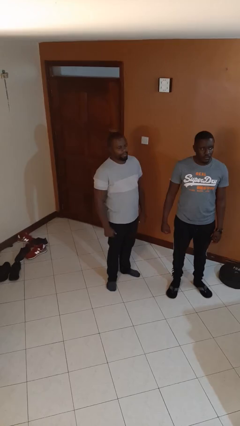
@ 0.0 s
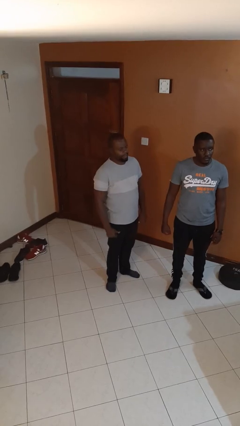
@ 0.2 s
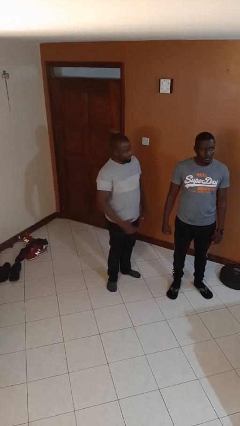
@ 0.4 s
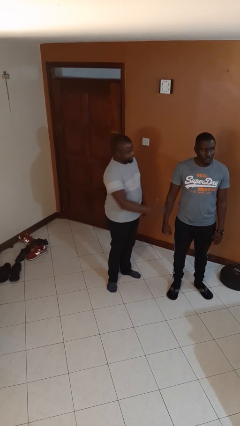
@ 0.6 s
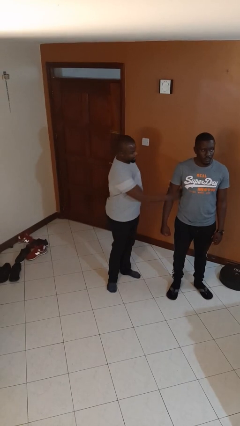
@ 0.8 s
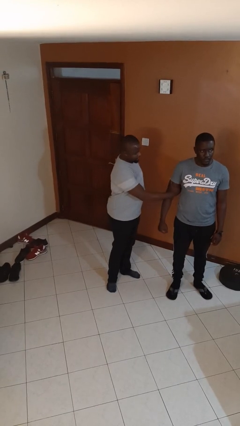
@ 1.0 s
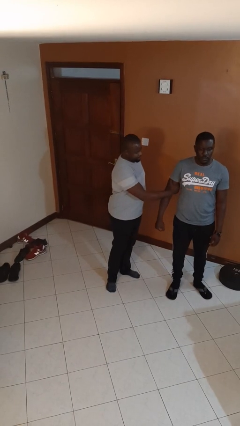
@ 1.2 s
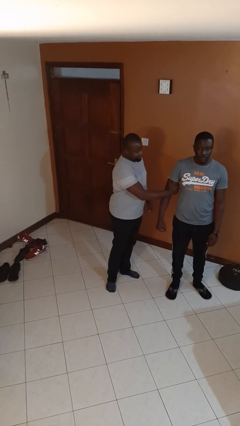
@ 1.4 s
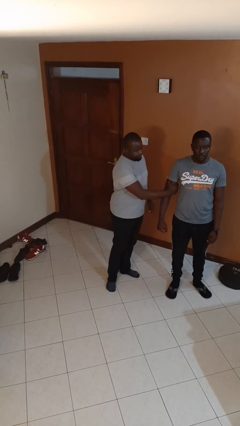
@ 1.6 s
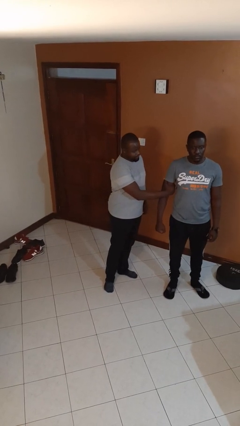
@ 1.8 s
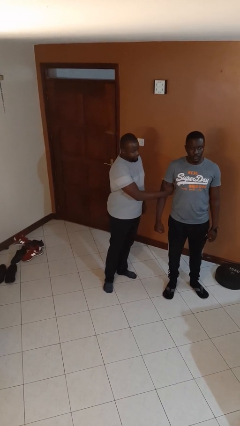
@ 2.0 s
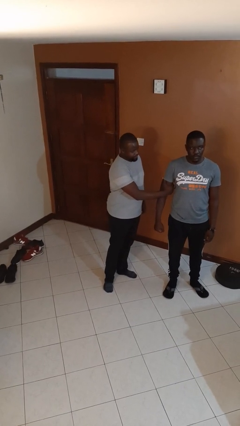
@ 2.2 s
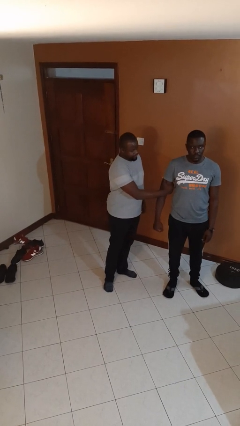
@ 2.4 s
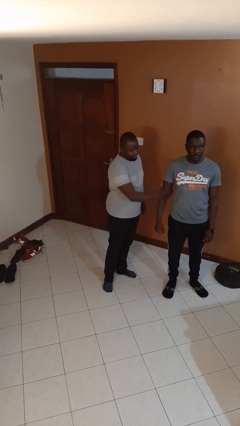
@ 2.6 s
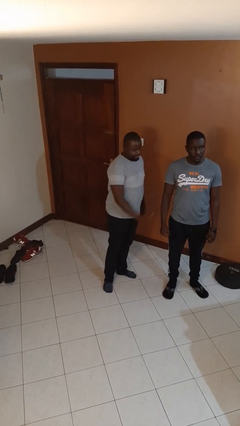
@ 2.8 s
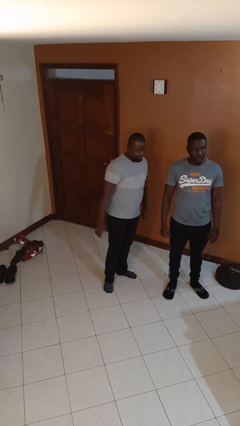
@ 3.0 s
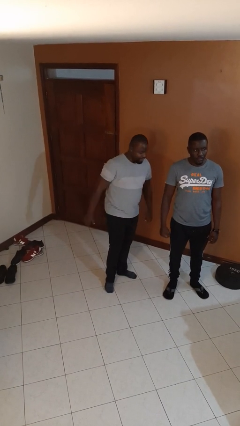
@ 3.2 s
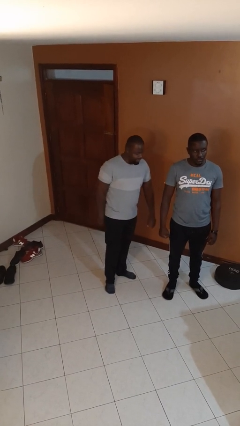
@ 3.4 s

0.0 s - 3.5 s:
person grabs person by bicep

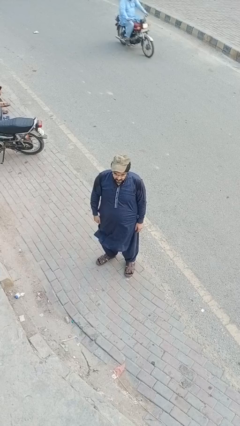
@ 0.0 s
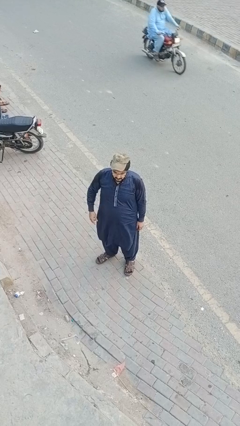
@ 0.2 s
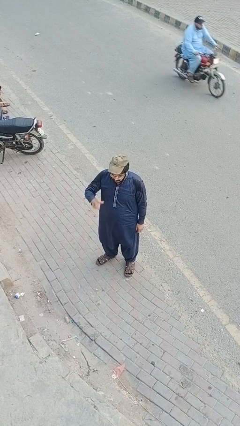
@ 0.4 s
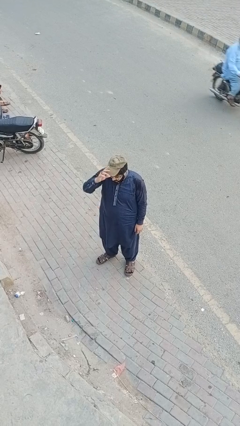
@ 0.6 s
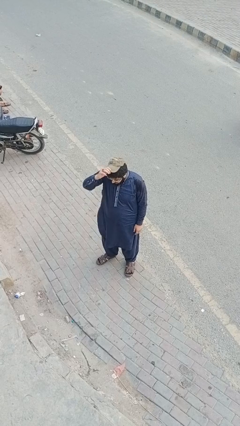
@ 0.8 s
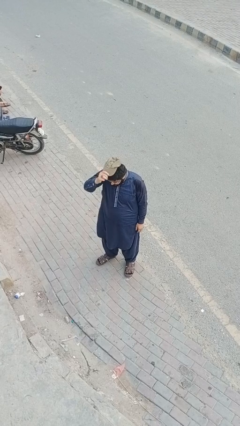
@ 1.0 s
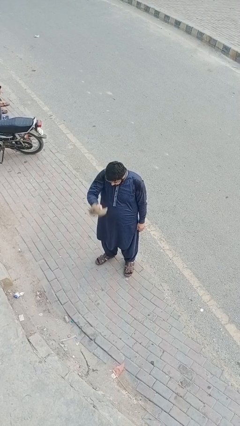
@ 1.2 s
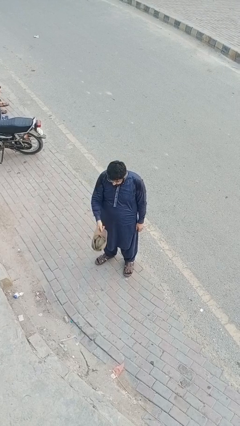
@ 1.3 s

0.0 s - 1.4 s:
person takes off hat

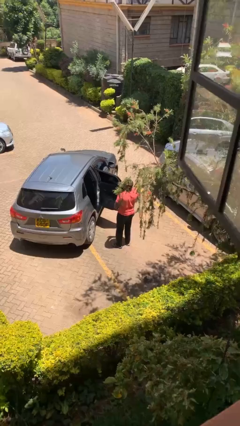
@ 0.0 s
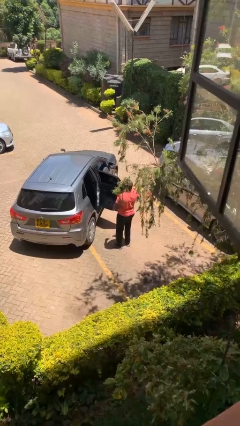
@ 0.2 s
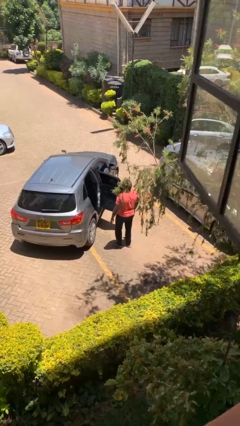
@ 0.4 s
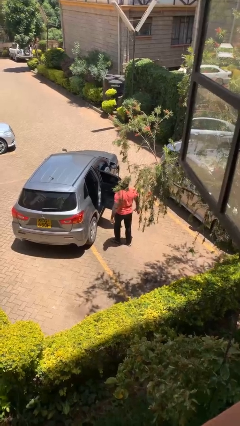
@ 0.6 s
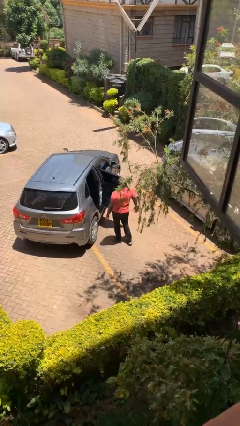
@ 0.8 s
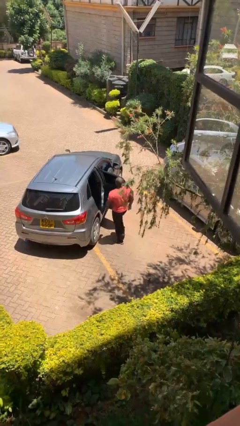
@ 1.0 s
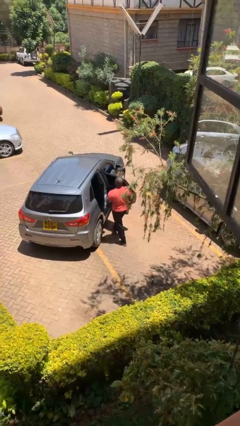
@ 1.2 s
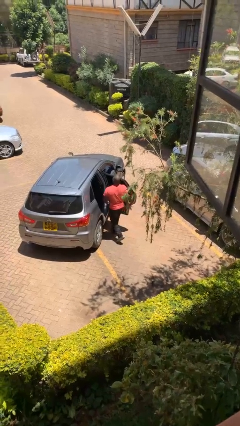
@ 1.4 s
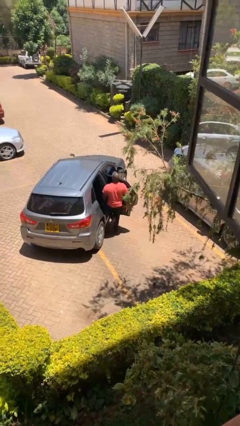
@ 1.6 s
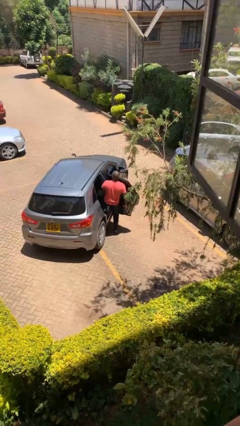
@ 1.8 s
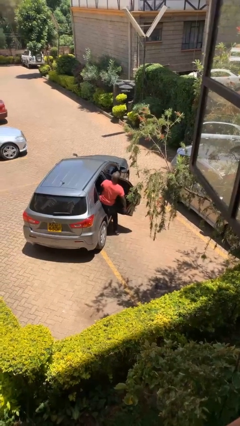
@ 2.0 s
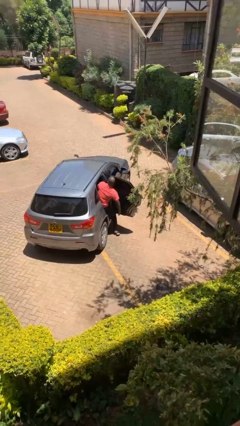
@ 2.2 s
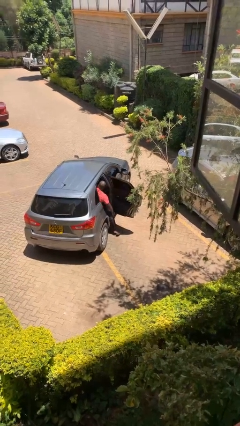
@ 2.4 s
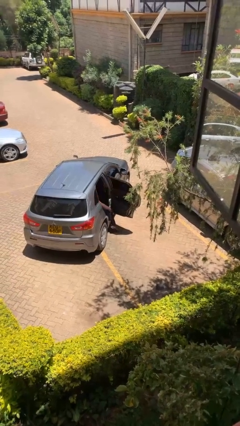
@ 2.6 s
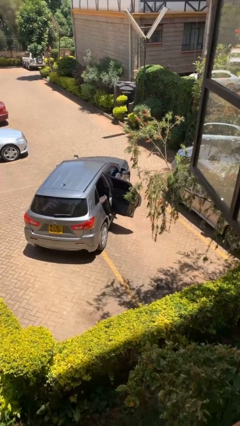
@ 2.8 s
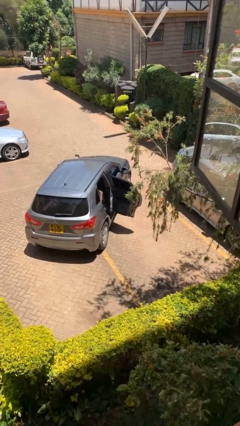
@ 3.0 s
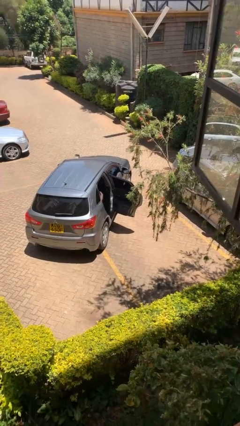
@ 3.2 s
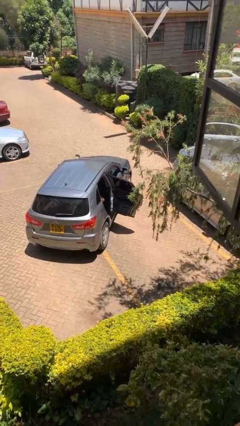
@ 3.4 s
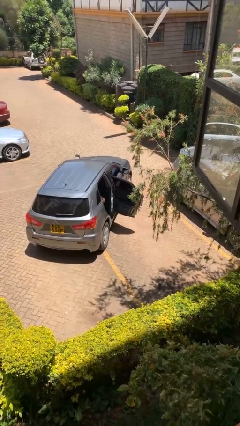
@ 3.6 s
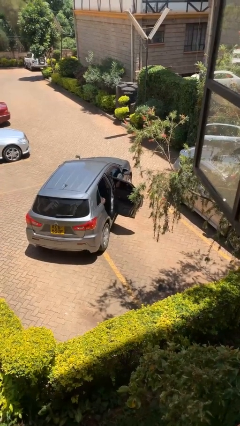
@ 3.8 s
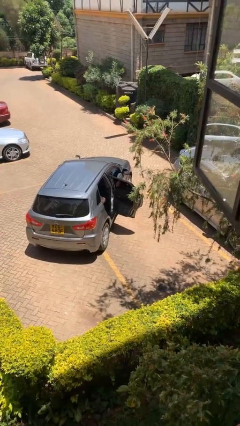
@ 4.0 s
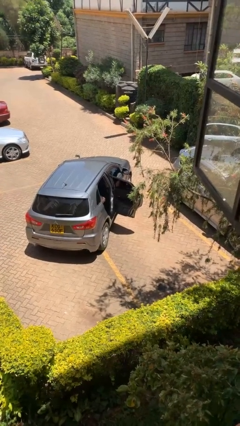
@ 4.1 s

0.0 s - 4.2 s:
person enters car

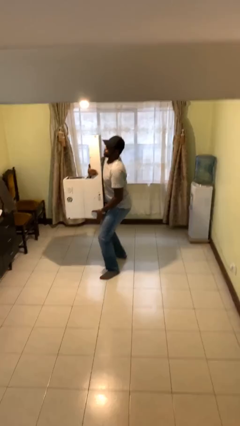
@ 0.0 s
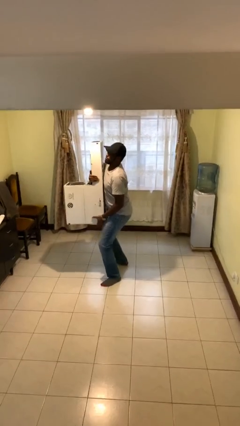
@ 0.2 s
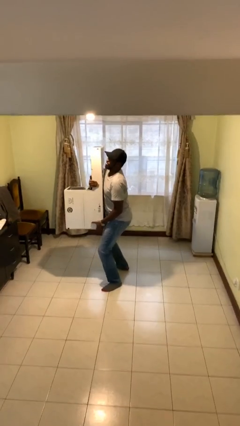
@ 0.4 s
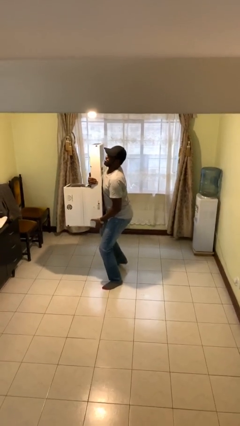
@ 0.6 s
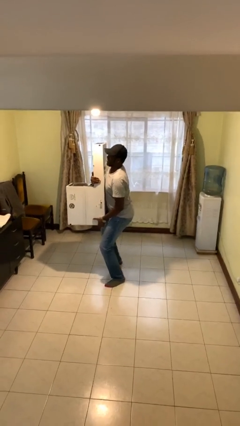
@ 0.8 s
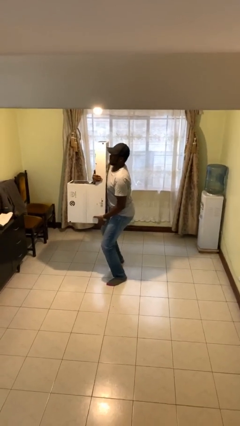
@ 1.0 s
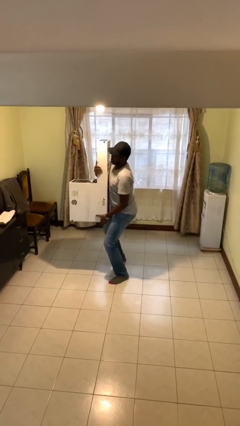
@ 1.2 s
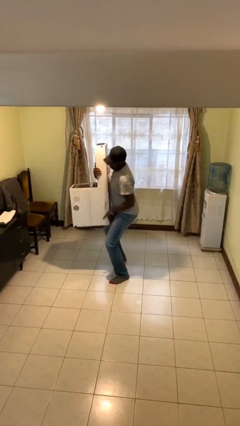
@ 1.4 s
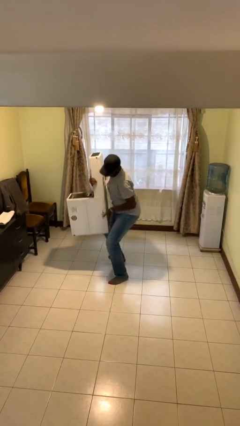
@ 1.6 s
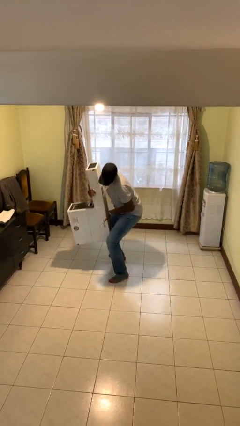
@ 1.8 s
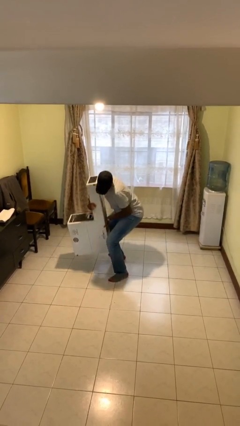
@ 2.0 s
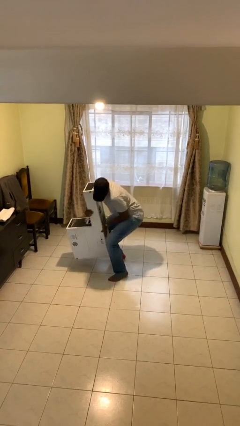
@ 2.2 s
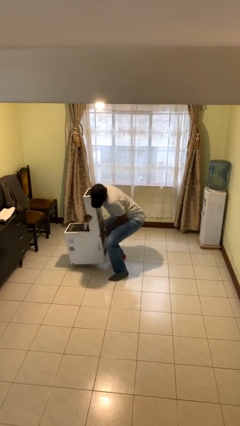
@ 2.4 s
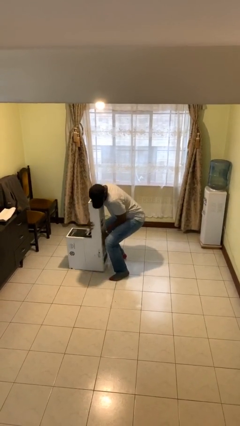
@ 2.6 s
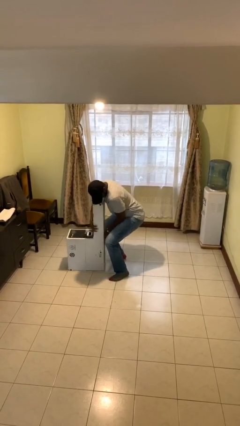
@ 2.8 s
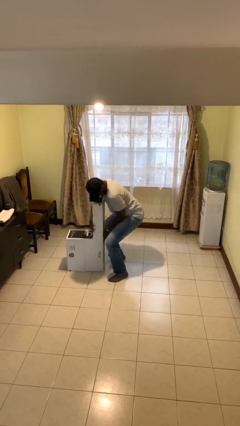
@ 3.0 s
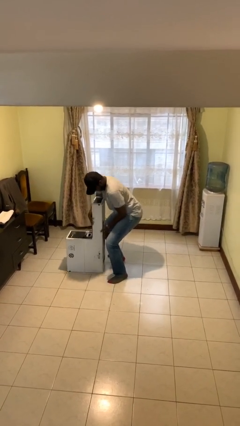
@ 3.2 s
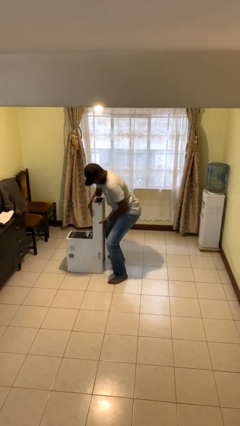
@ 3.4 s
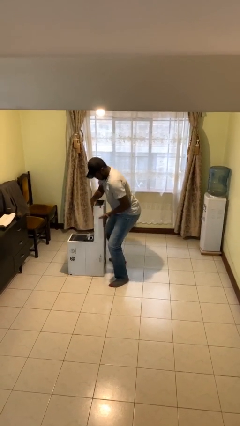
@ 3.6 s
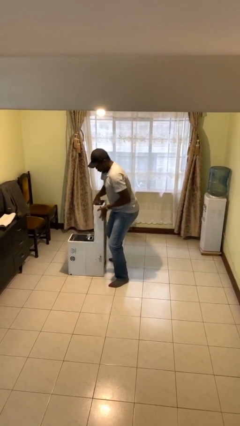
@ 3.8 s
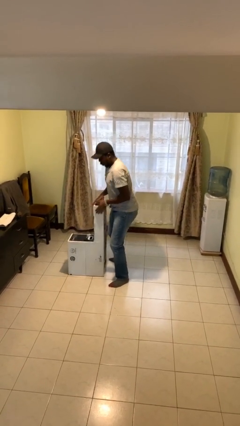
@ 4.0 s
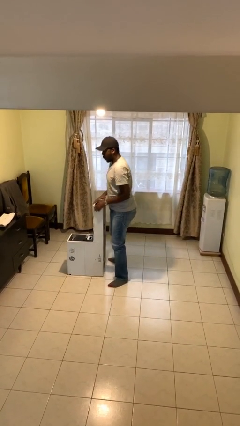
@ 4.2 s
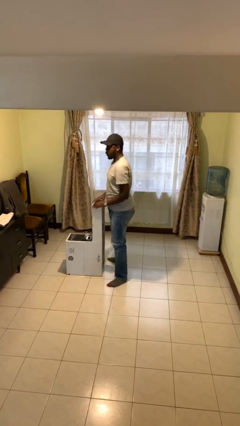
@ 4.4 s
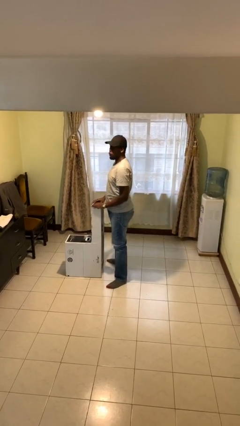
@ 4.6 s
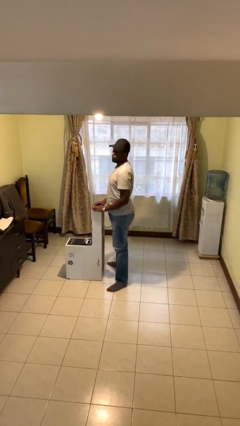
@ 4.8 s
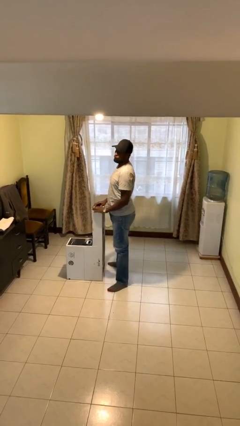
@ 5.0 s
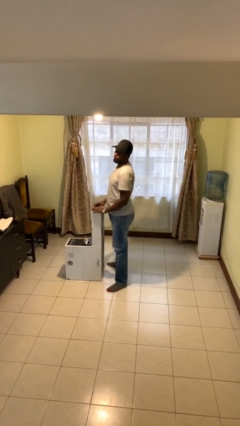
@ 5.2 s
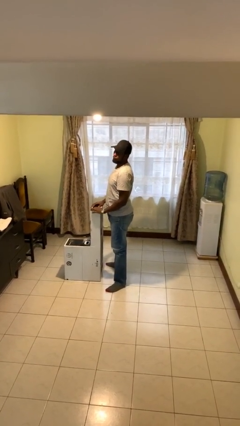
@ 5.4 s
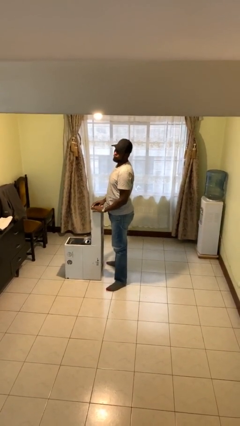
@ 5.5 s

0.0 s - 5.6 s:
person puts down object on floor

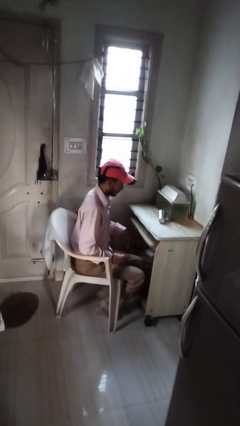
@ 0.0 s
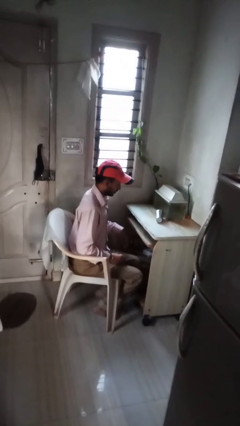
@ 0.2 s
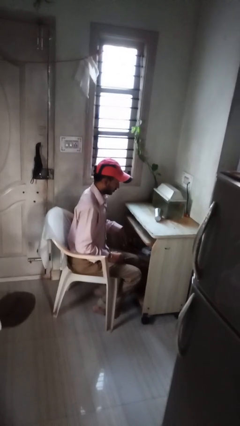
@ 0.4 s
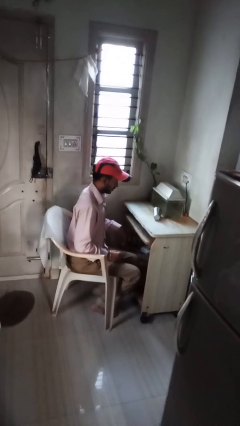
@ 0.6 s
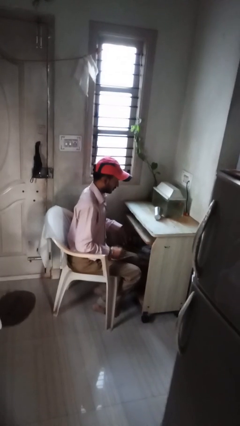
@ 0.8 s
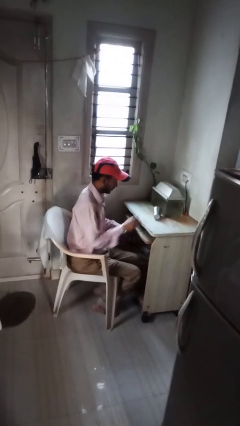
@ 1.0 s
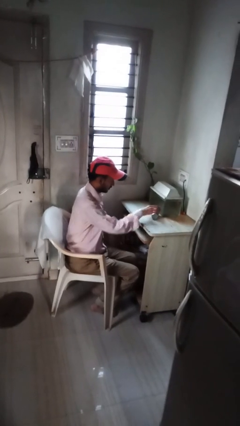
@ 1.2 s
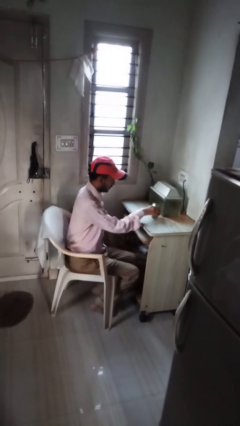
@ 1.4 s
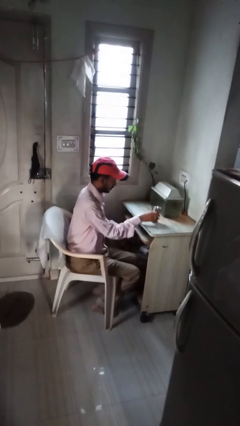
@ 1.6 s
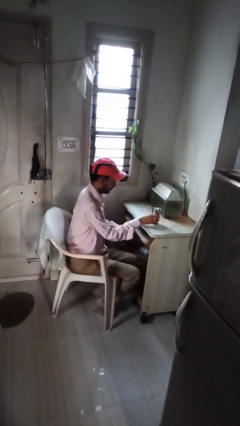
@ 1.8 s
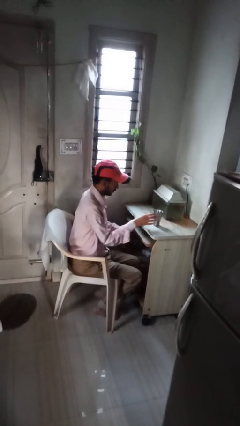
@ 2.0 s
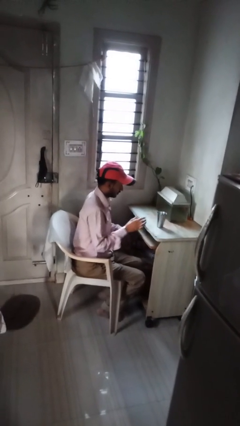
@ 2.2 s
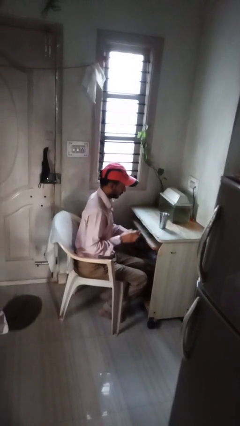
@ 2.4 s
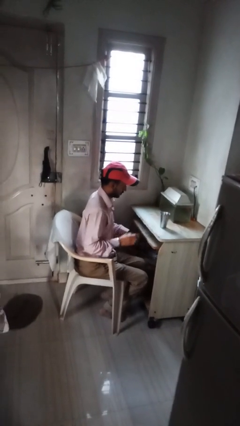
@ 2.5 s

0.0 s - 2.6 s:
person sets upright glass
